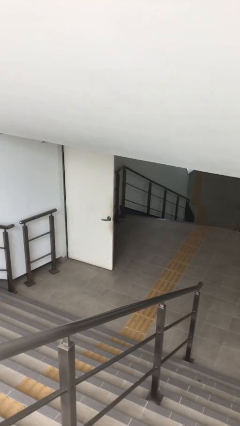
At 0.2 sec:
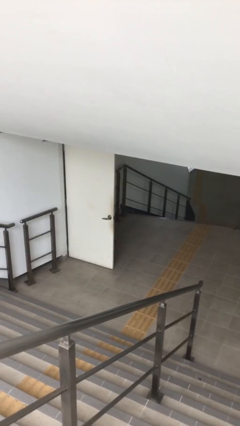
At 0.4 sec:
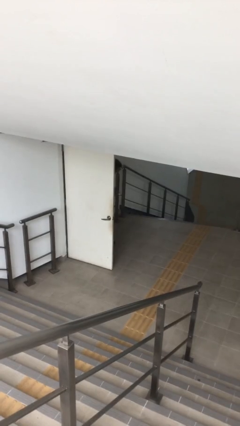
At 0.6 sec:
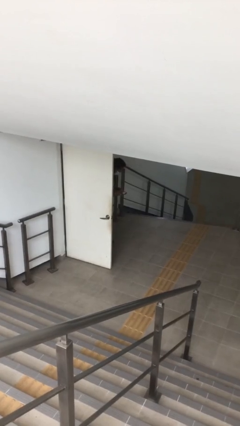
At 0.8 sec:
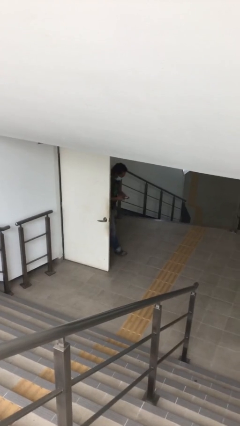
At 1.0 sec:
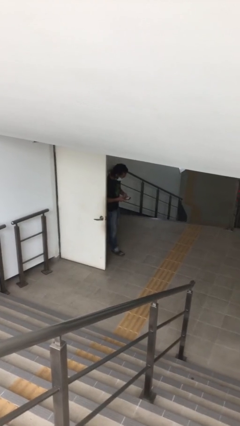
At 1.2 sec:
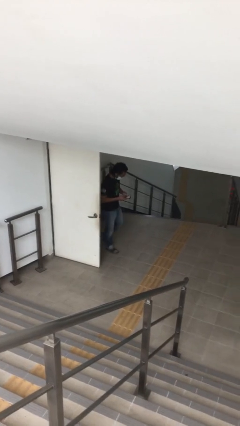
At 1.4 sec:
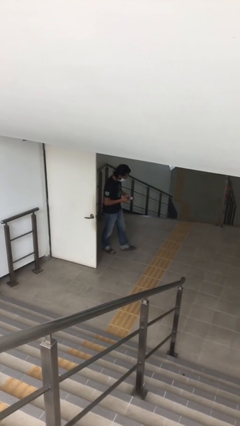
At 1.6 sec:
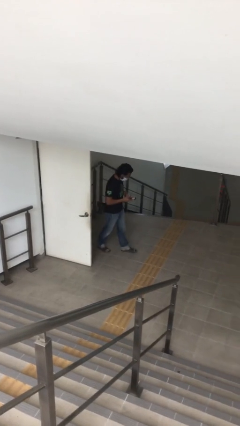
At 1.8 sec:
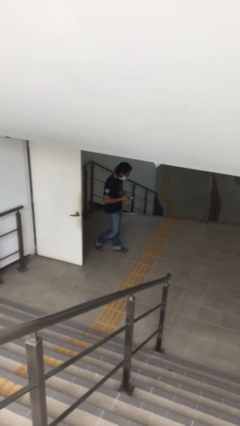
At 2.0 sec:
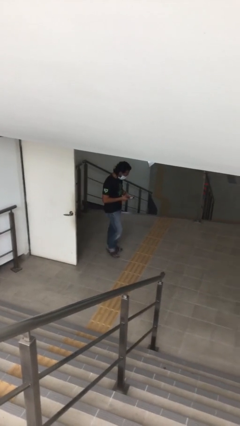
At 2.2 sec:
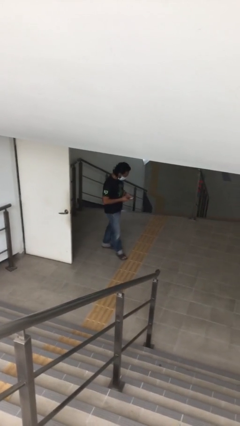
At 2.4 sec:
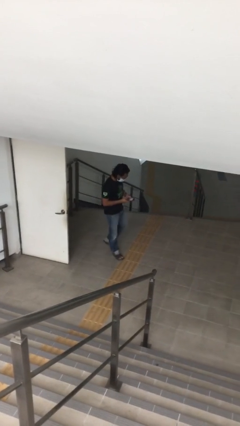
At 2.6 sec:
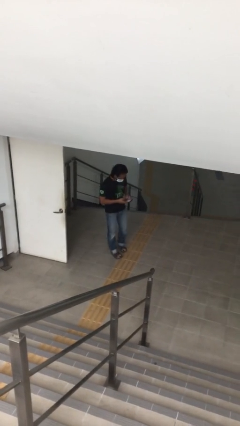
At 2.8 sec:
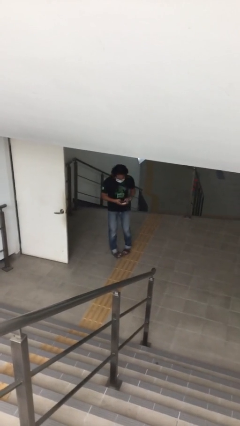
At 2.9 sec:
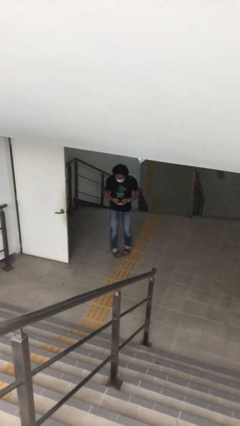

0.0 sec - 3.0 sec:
person enters scene through structure

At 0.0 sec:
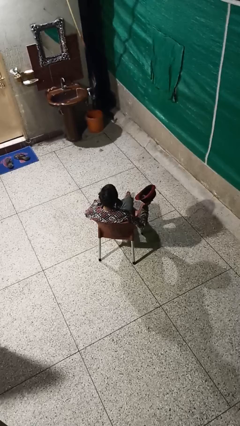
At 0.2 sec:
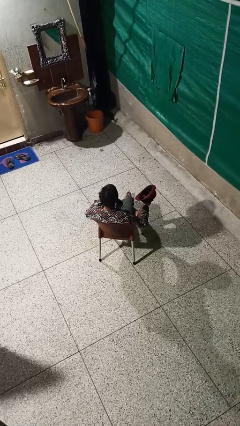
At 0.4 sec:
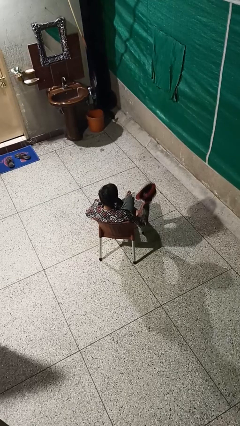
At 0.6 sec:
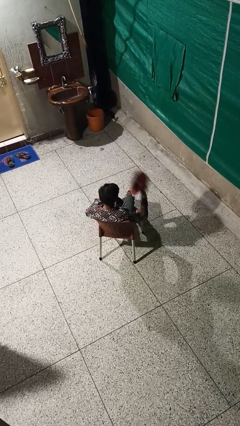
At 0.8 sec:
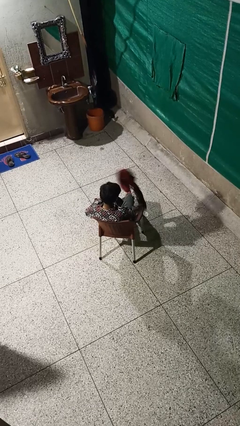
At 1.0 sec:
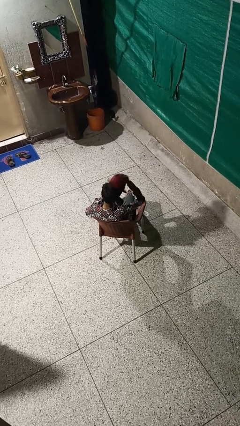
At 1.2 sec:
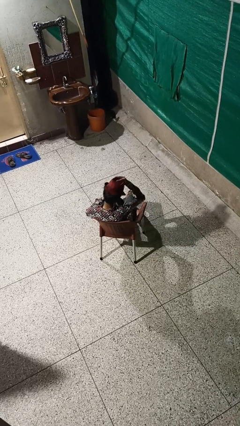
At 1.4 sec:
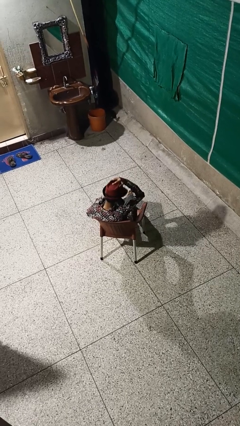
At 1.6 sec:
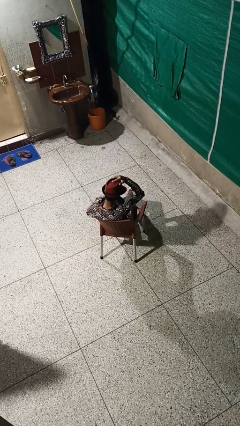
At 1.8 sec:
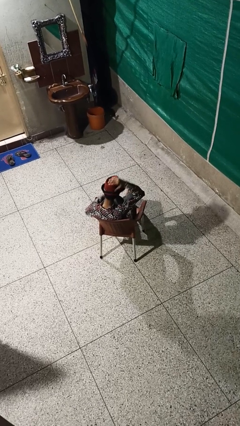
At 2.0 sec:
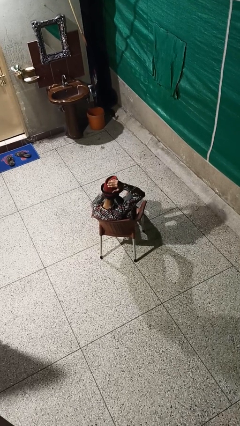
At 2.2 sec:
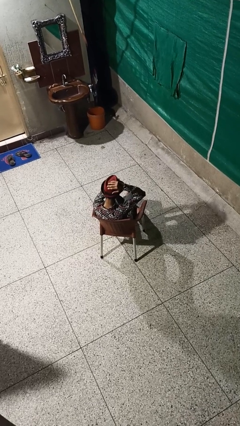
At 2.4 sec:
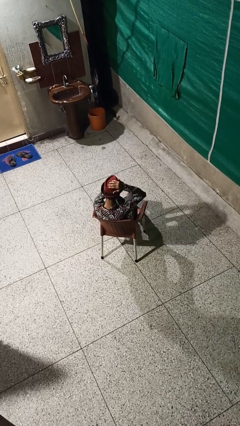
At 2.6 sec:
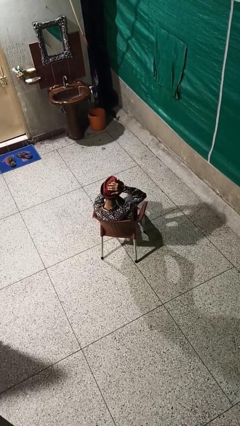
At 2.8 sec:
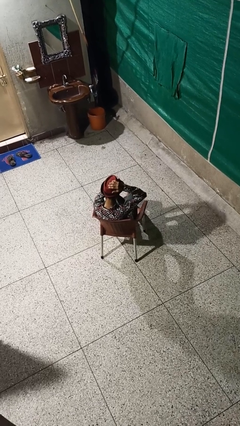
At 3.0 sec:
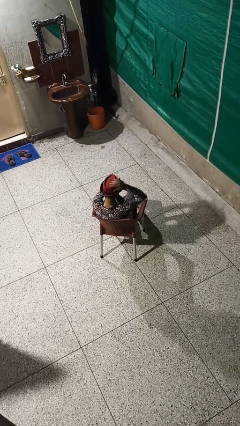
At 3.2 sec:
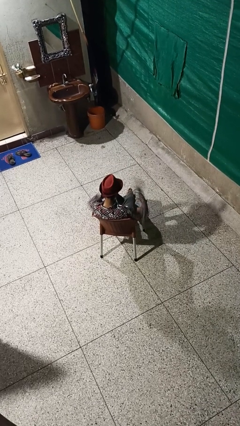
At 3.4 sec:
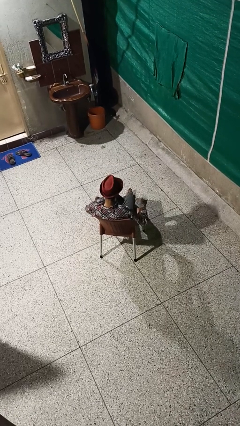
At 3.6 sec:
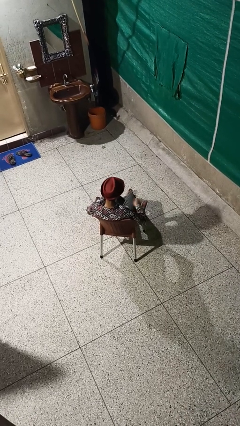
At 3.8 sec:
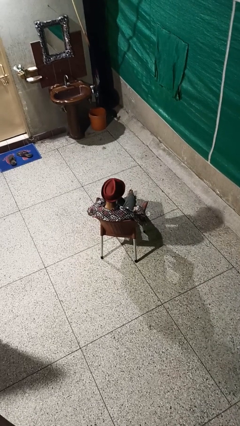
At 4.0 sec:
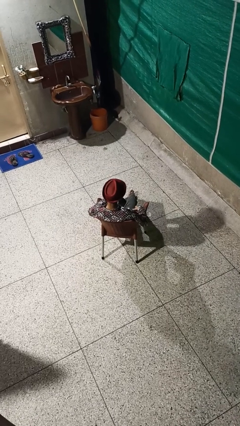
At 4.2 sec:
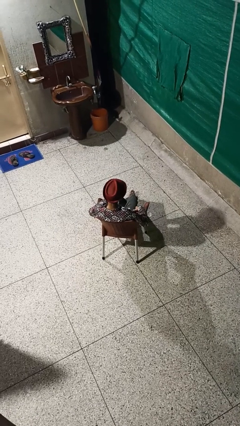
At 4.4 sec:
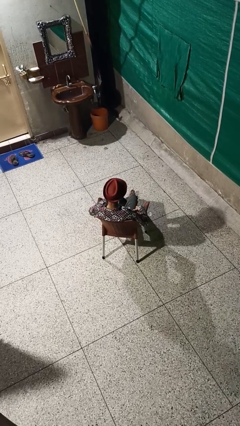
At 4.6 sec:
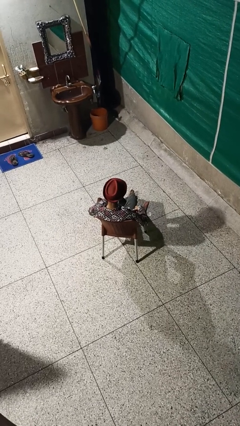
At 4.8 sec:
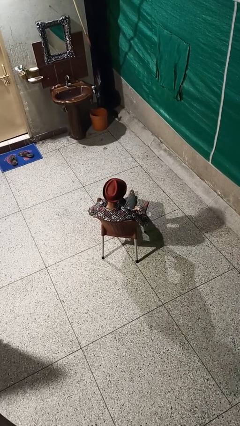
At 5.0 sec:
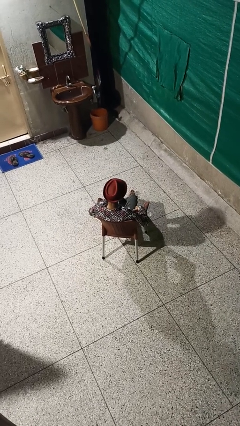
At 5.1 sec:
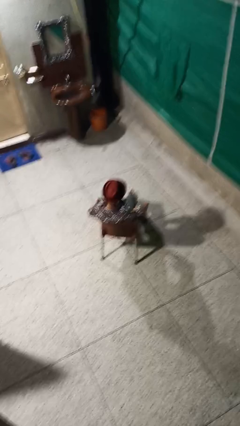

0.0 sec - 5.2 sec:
person puts on hat

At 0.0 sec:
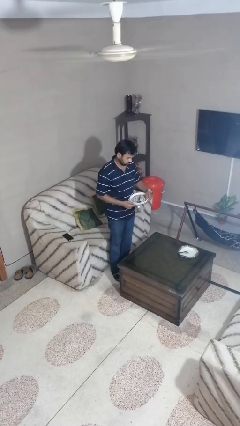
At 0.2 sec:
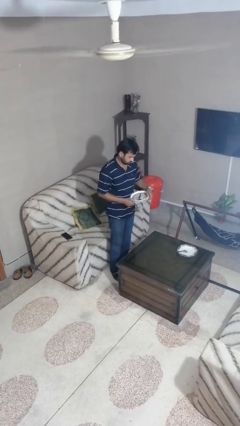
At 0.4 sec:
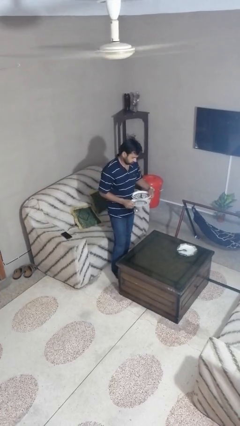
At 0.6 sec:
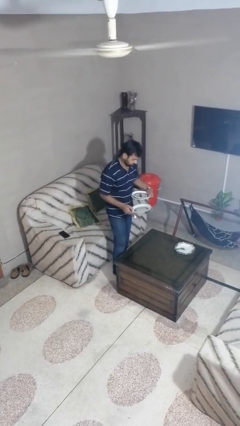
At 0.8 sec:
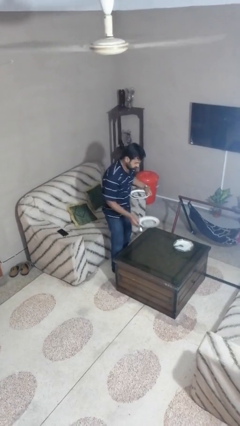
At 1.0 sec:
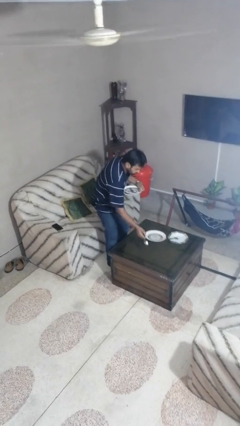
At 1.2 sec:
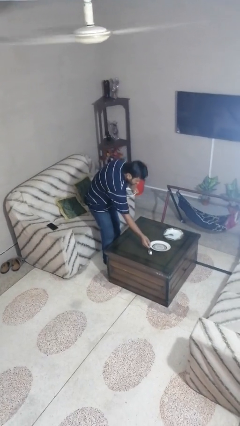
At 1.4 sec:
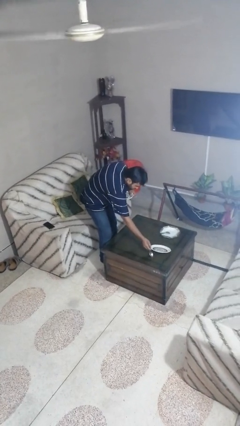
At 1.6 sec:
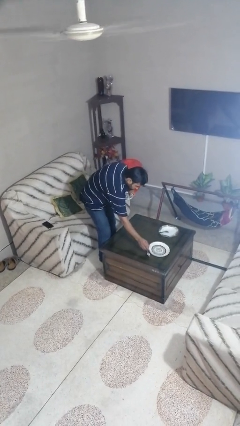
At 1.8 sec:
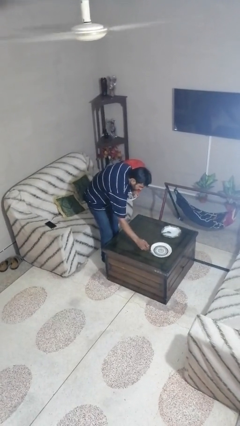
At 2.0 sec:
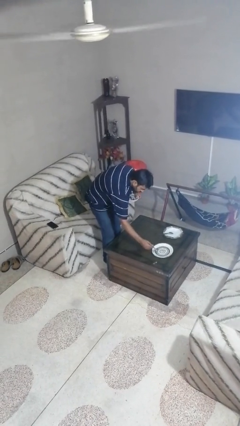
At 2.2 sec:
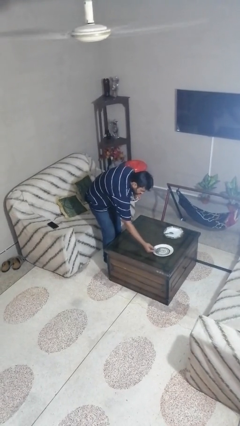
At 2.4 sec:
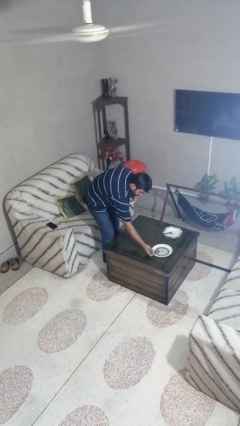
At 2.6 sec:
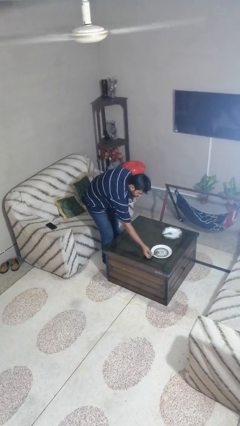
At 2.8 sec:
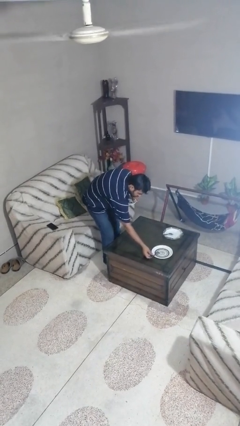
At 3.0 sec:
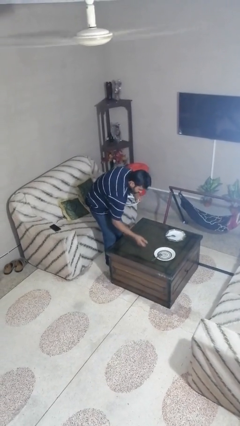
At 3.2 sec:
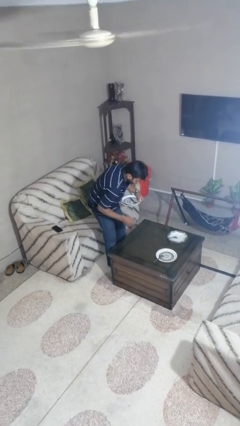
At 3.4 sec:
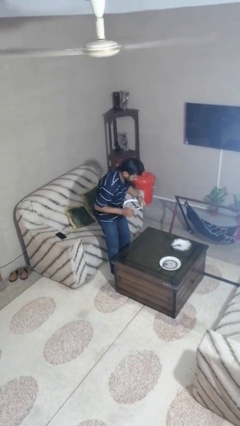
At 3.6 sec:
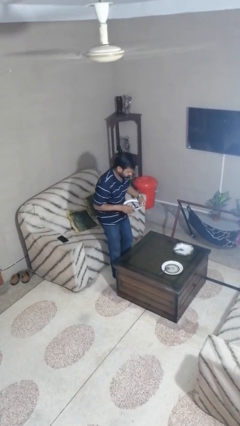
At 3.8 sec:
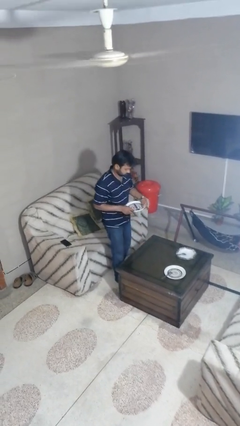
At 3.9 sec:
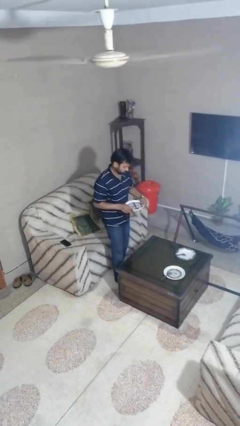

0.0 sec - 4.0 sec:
person sets table

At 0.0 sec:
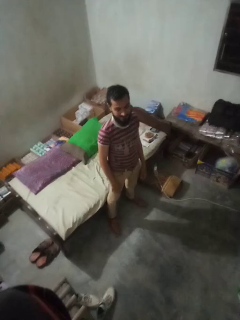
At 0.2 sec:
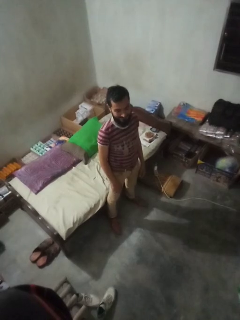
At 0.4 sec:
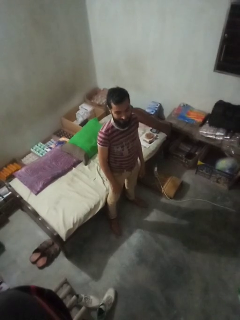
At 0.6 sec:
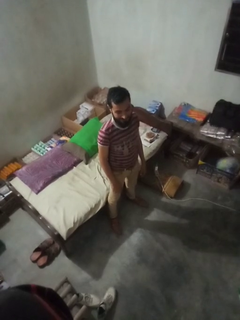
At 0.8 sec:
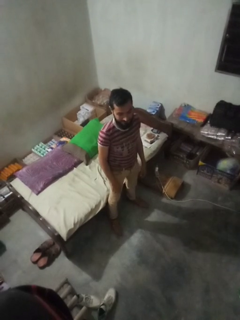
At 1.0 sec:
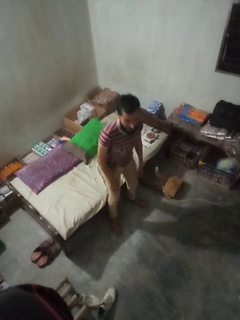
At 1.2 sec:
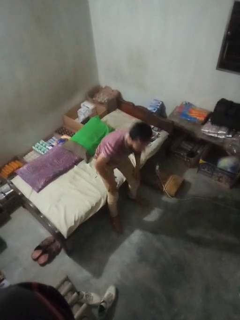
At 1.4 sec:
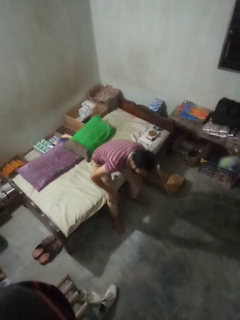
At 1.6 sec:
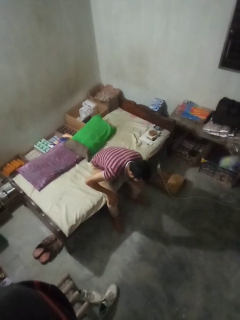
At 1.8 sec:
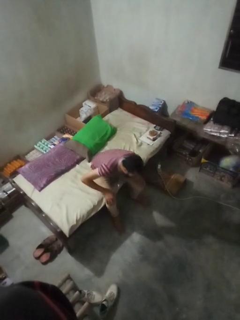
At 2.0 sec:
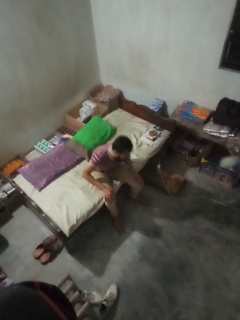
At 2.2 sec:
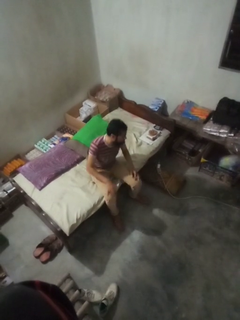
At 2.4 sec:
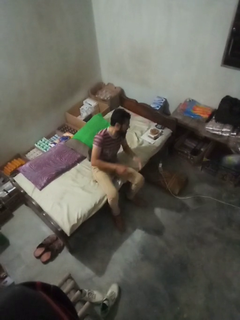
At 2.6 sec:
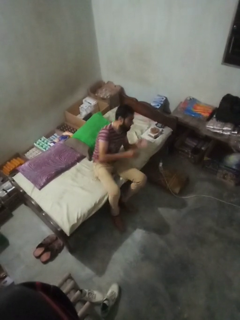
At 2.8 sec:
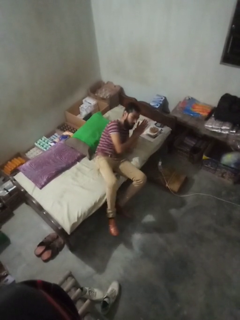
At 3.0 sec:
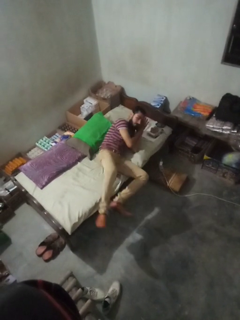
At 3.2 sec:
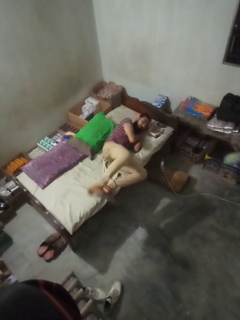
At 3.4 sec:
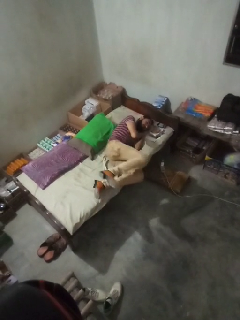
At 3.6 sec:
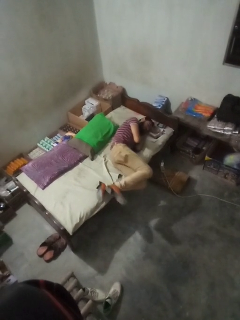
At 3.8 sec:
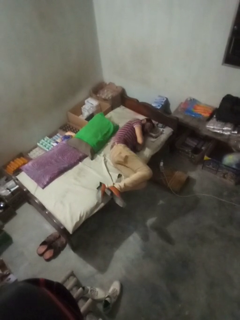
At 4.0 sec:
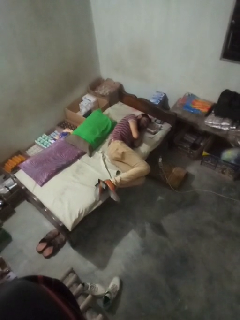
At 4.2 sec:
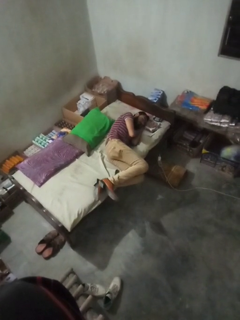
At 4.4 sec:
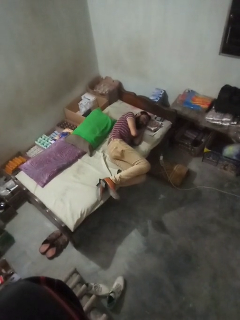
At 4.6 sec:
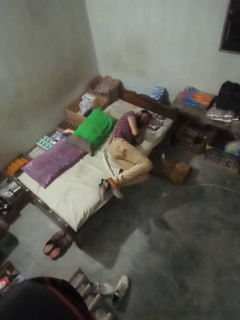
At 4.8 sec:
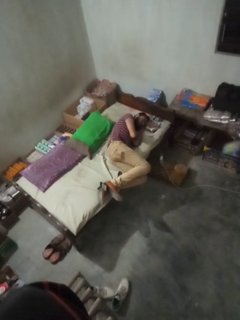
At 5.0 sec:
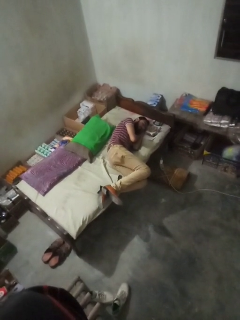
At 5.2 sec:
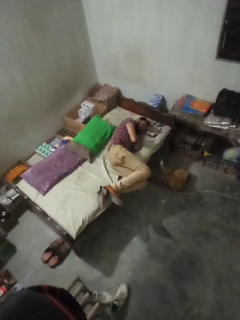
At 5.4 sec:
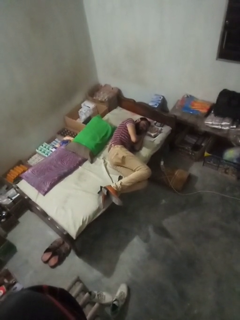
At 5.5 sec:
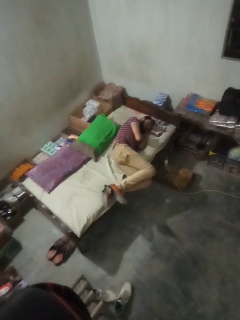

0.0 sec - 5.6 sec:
person lies down on couch

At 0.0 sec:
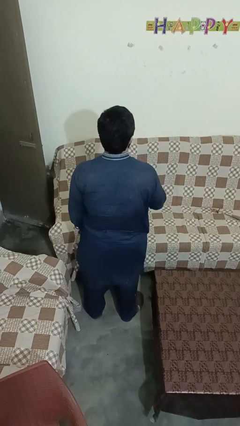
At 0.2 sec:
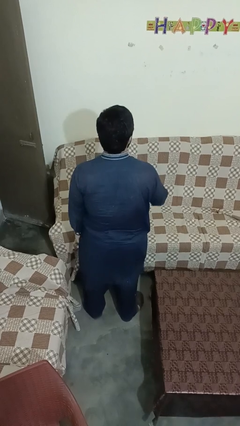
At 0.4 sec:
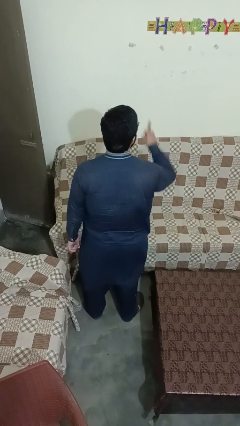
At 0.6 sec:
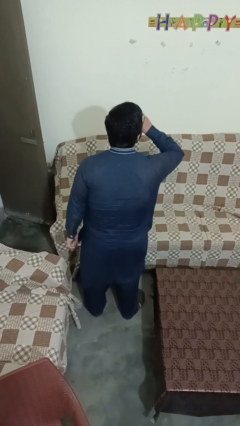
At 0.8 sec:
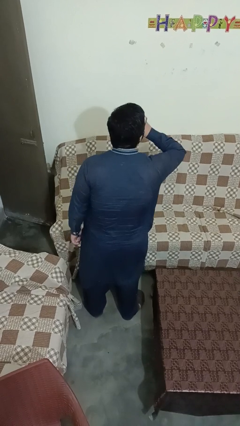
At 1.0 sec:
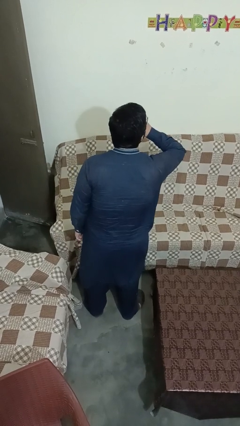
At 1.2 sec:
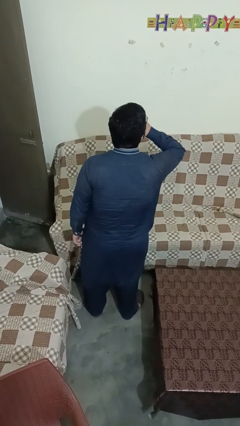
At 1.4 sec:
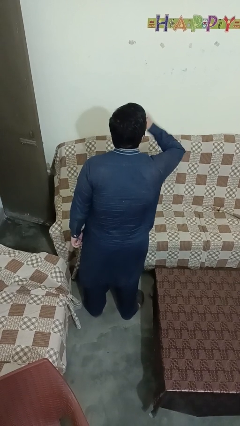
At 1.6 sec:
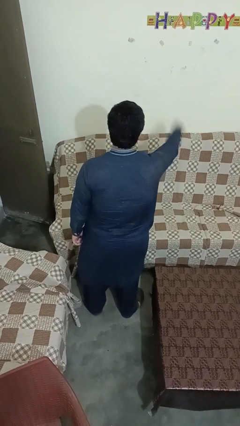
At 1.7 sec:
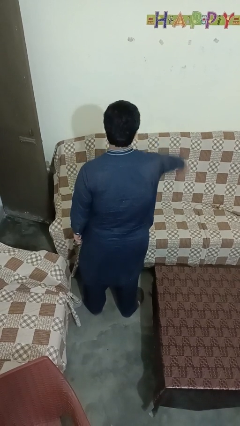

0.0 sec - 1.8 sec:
person gestures be quiet
